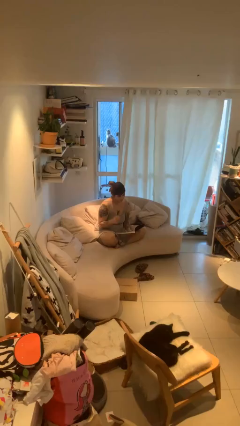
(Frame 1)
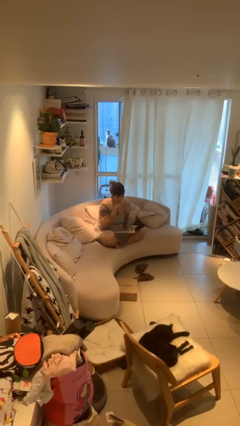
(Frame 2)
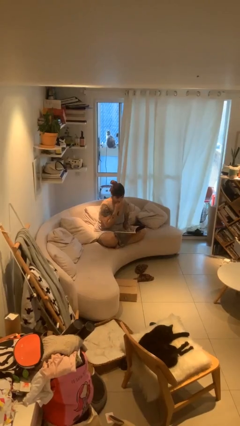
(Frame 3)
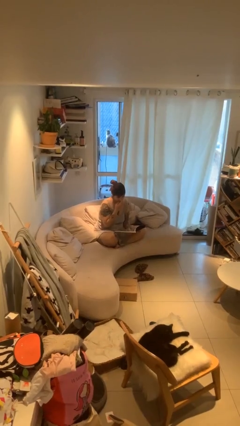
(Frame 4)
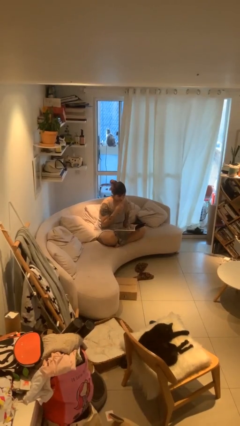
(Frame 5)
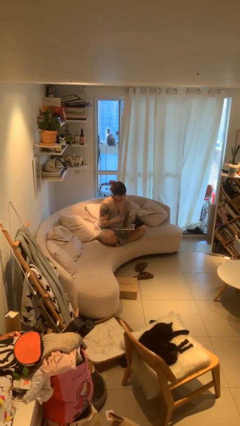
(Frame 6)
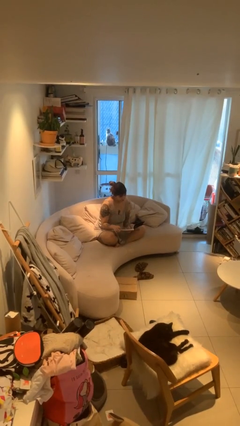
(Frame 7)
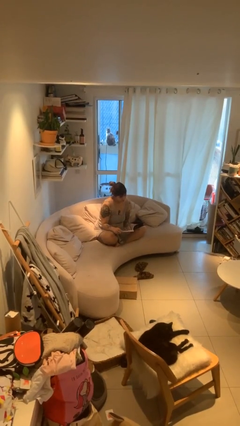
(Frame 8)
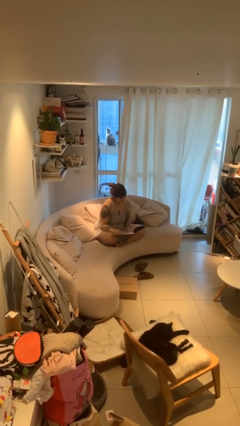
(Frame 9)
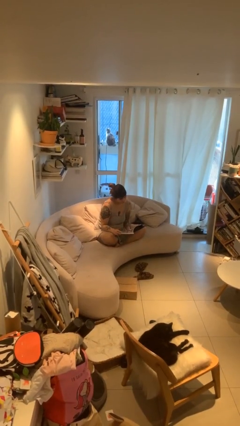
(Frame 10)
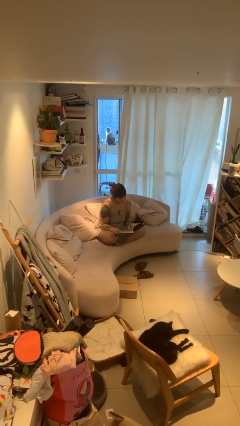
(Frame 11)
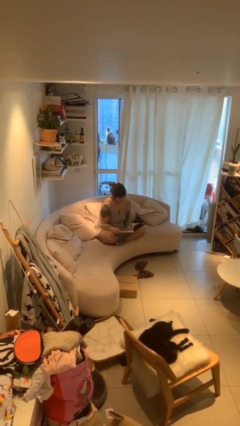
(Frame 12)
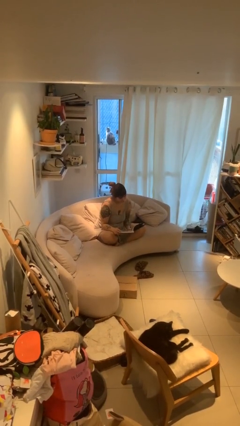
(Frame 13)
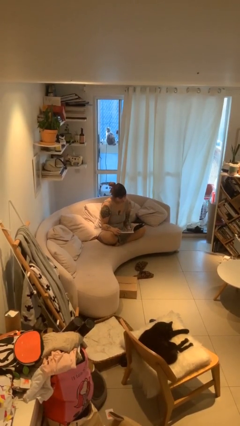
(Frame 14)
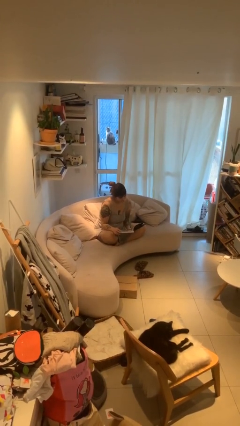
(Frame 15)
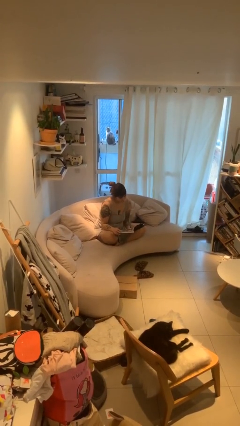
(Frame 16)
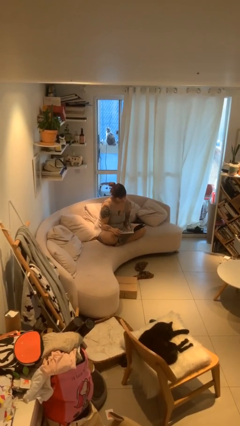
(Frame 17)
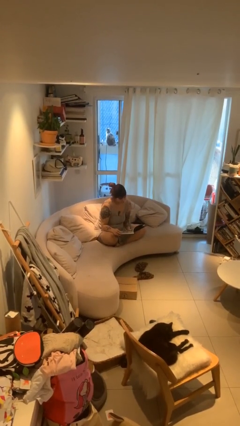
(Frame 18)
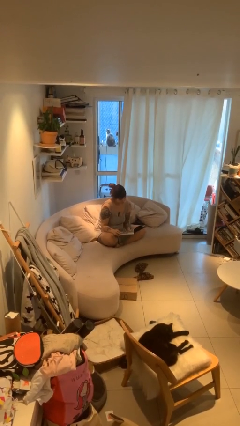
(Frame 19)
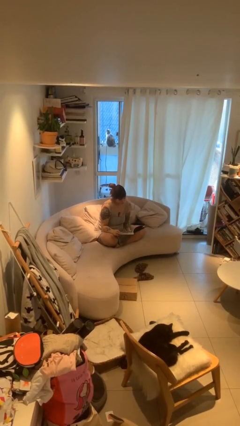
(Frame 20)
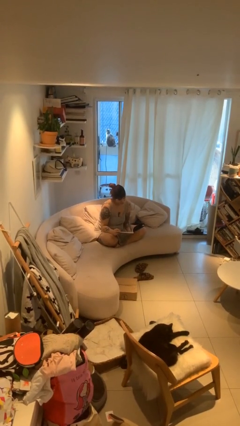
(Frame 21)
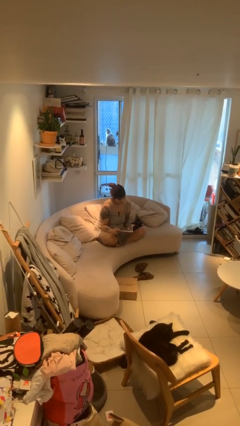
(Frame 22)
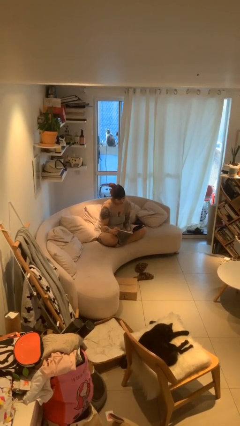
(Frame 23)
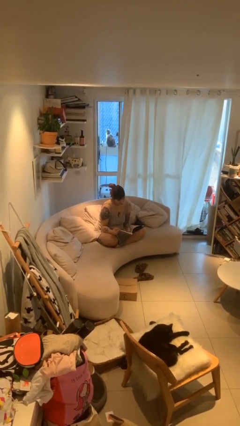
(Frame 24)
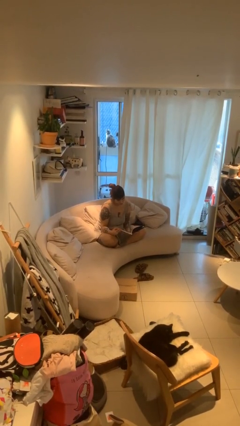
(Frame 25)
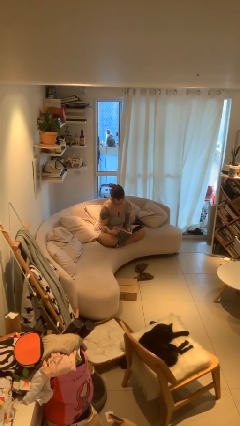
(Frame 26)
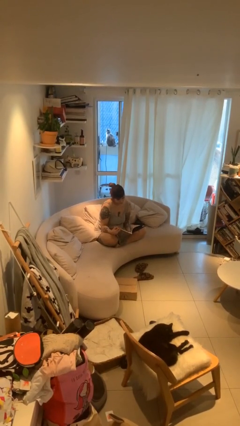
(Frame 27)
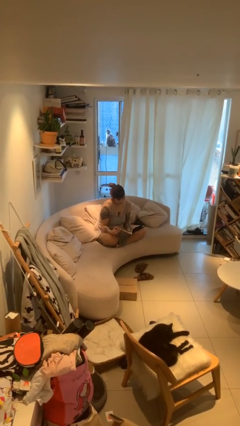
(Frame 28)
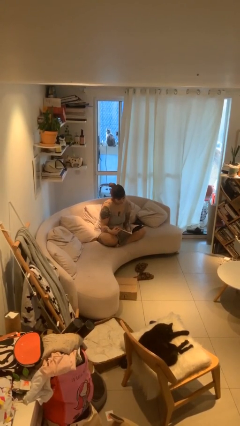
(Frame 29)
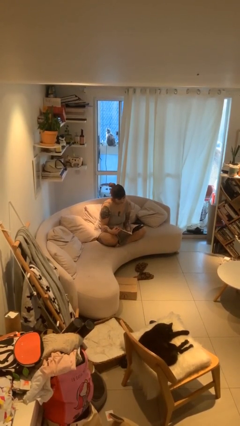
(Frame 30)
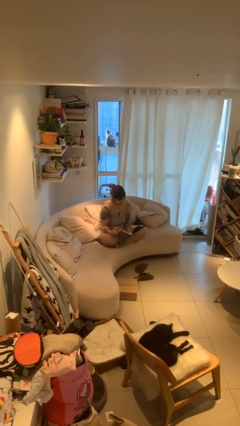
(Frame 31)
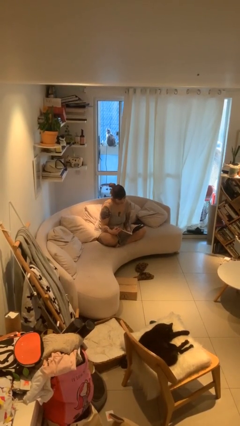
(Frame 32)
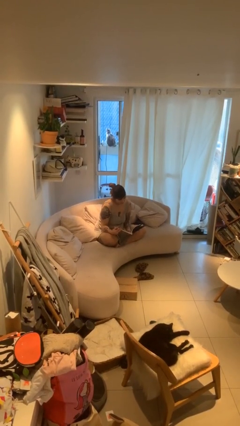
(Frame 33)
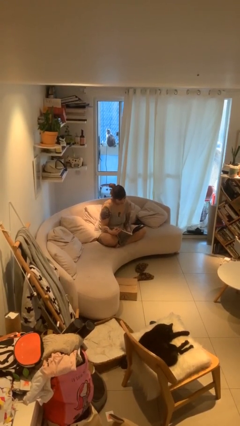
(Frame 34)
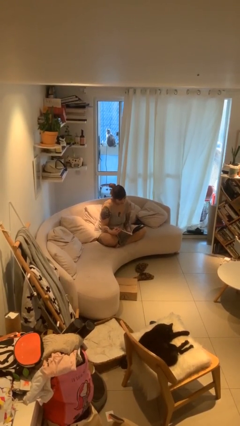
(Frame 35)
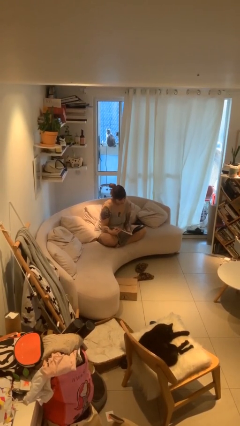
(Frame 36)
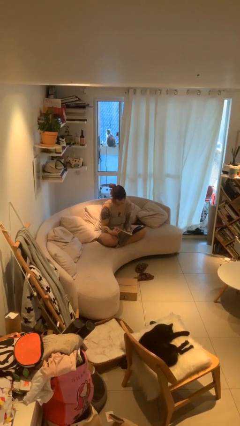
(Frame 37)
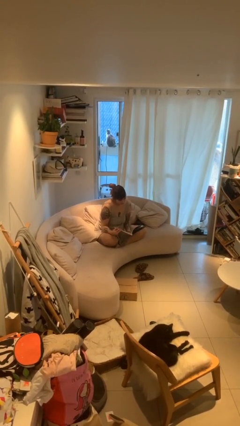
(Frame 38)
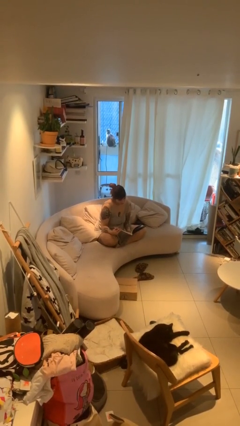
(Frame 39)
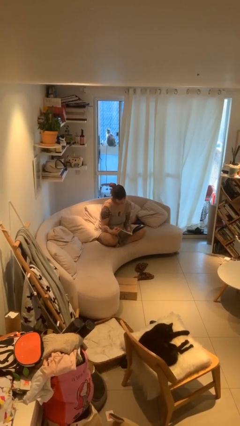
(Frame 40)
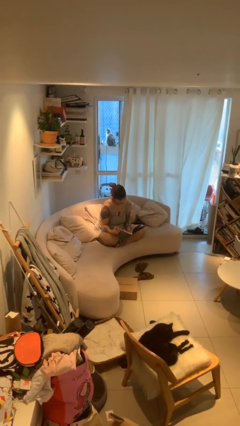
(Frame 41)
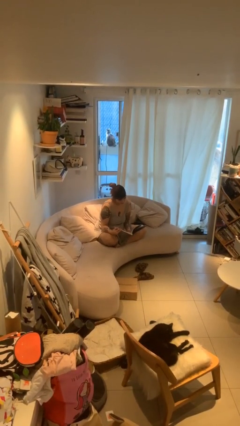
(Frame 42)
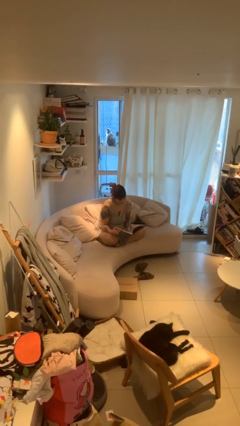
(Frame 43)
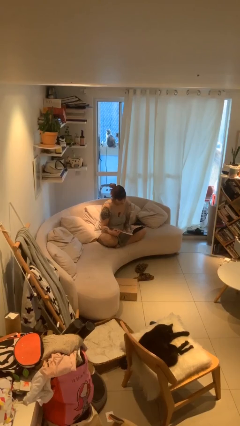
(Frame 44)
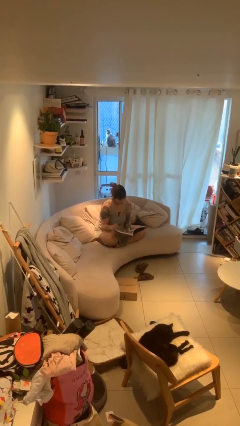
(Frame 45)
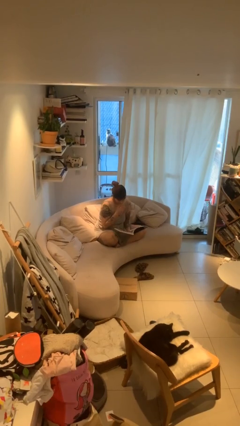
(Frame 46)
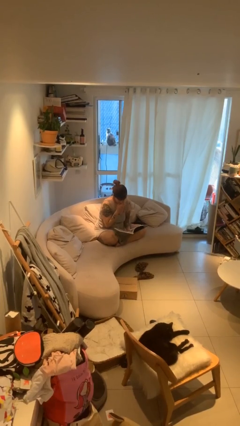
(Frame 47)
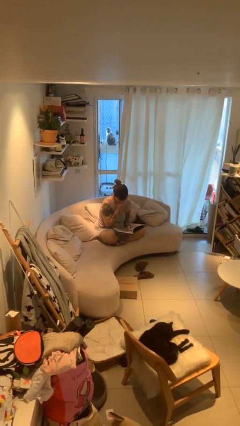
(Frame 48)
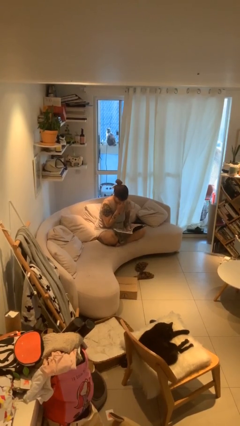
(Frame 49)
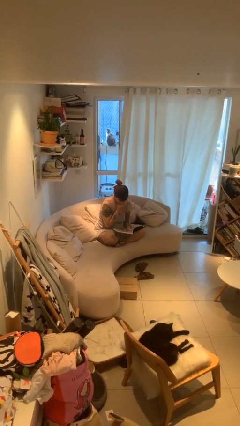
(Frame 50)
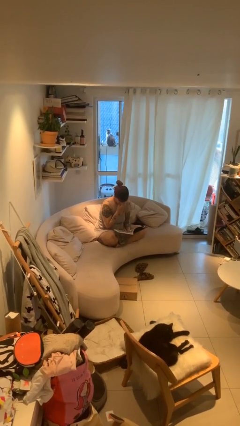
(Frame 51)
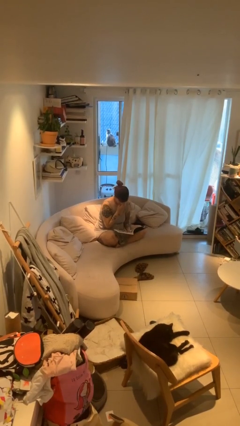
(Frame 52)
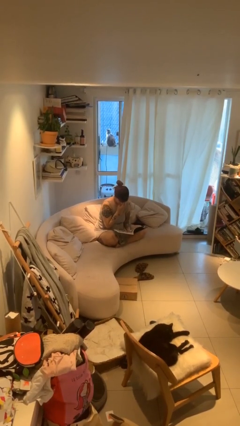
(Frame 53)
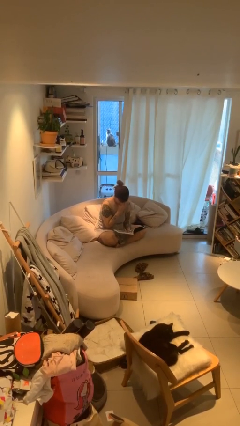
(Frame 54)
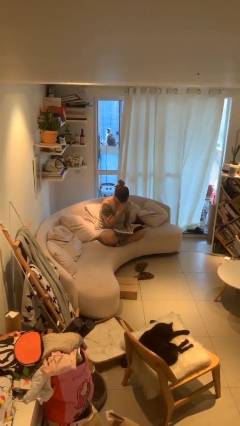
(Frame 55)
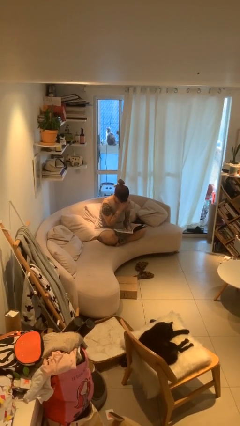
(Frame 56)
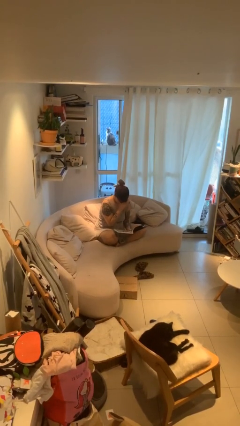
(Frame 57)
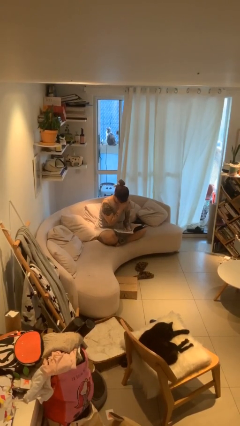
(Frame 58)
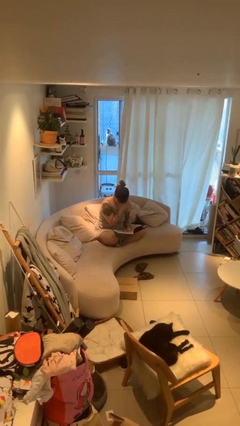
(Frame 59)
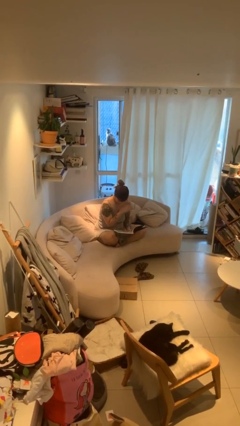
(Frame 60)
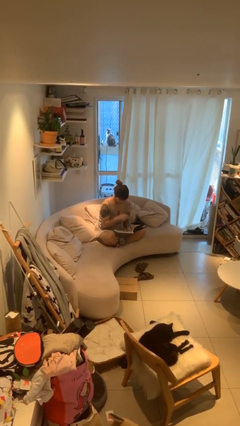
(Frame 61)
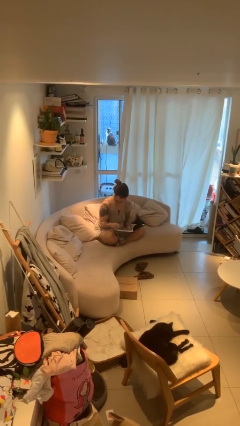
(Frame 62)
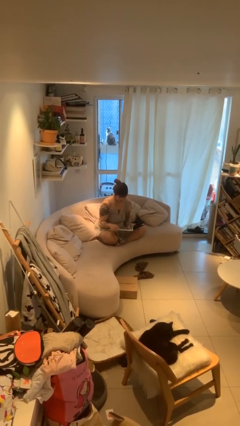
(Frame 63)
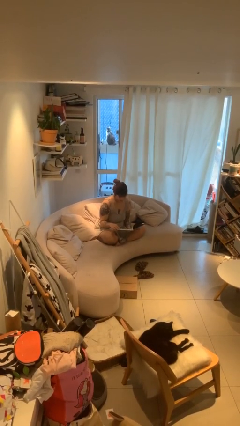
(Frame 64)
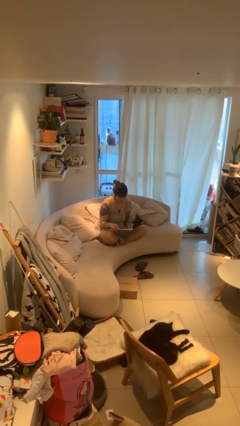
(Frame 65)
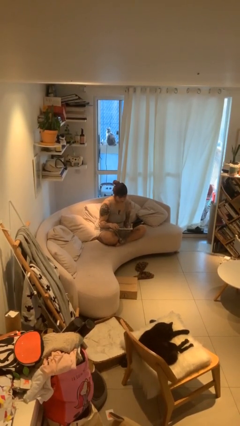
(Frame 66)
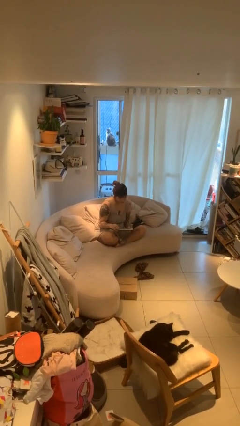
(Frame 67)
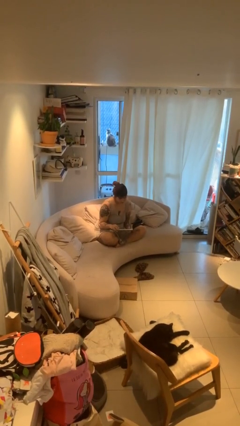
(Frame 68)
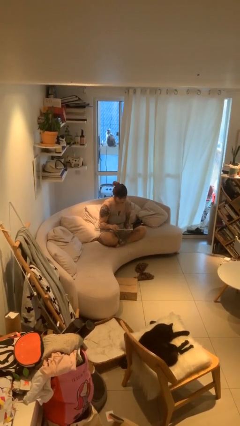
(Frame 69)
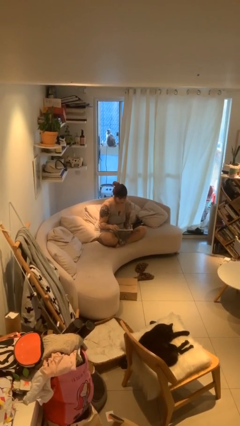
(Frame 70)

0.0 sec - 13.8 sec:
person reads document

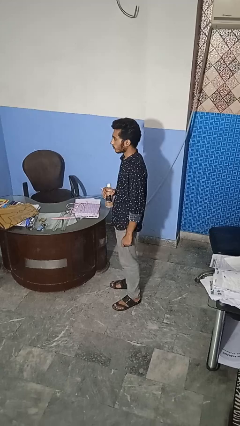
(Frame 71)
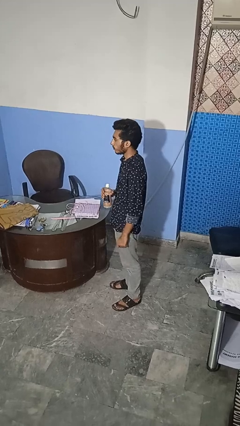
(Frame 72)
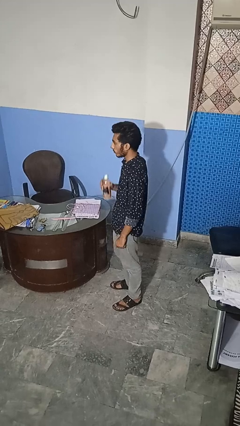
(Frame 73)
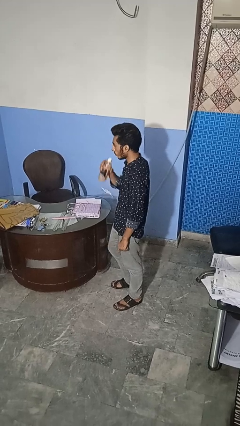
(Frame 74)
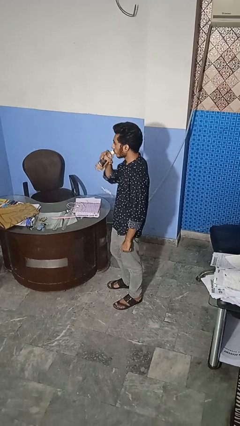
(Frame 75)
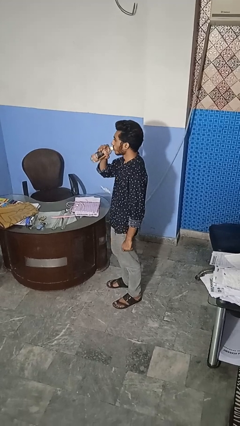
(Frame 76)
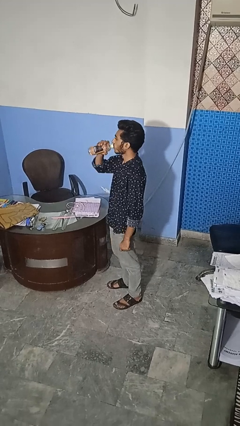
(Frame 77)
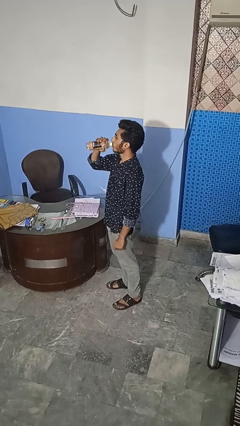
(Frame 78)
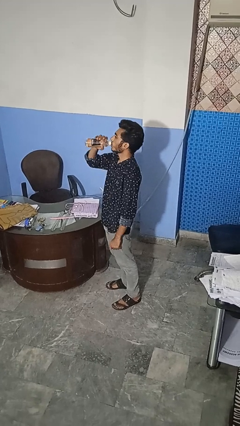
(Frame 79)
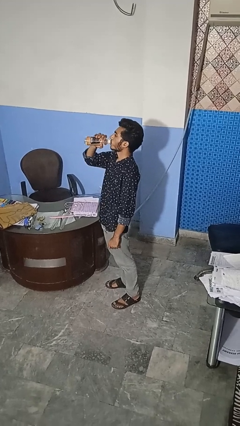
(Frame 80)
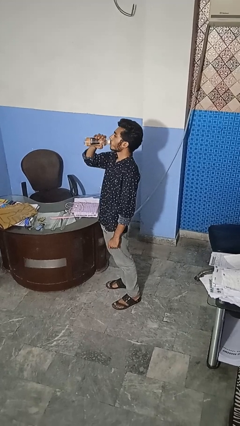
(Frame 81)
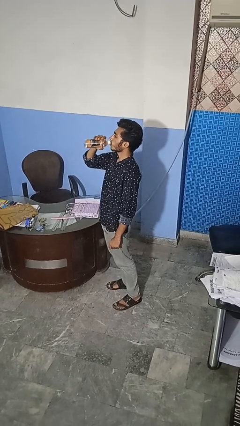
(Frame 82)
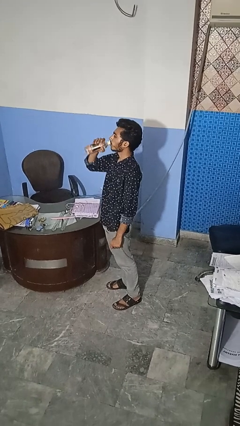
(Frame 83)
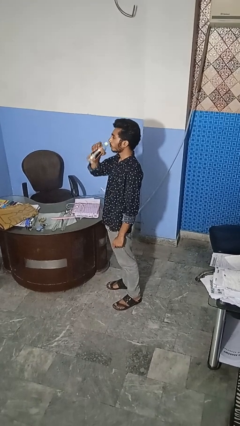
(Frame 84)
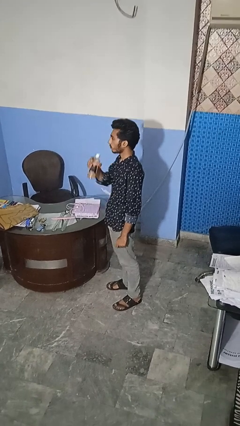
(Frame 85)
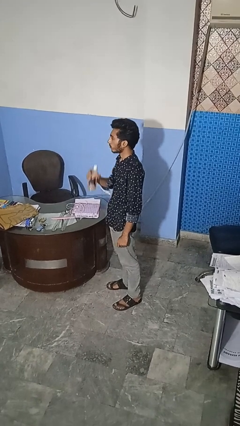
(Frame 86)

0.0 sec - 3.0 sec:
person drinks from bottle

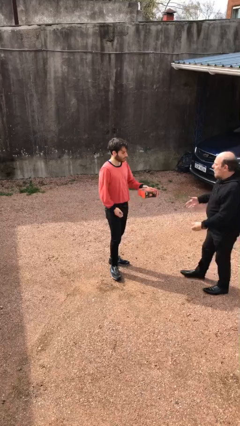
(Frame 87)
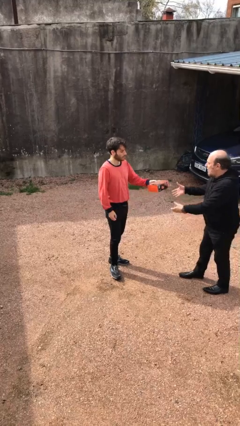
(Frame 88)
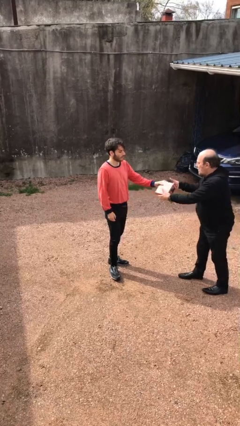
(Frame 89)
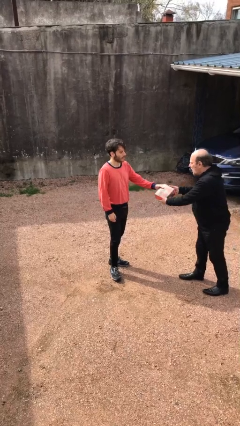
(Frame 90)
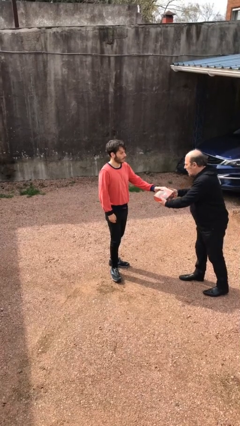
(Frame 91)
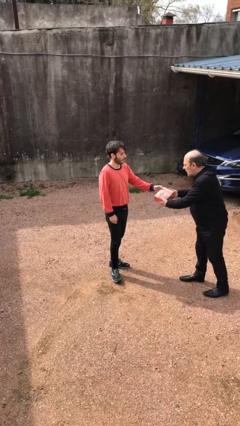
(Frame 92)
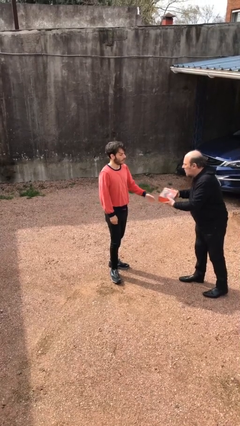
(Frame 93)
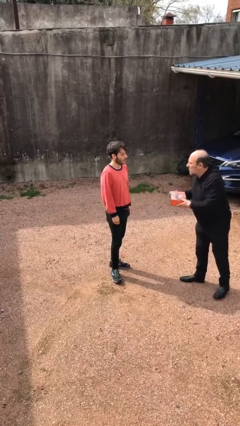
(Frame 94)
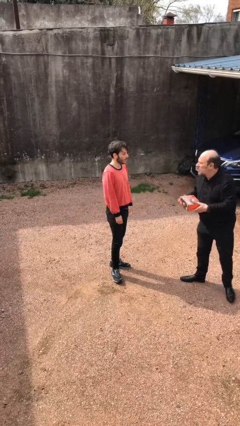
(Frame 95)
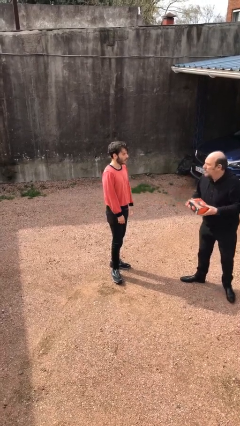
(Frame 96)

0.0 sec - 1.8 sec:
person transfers object to person
